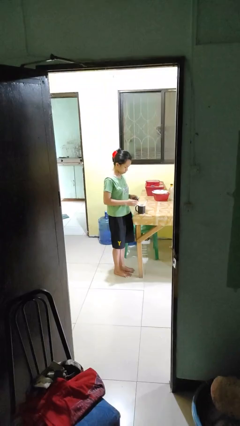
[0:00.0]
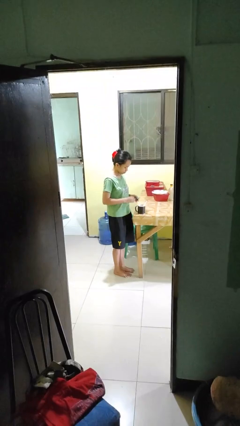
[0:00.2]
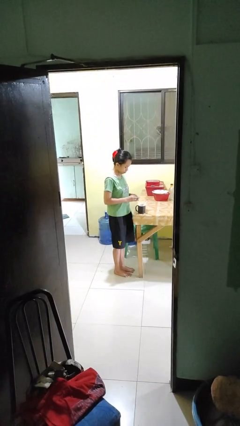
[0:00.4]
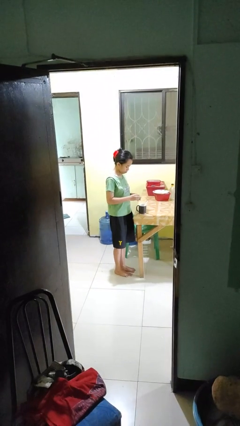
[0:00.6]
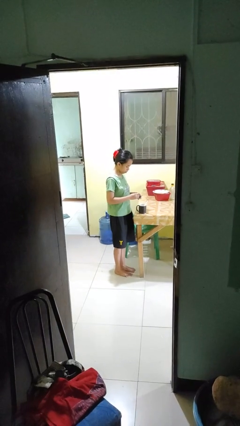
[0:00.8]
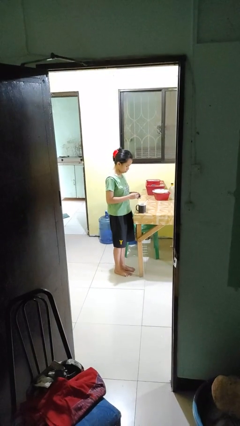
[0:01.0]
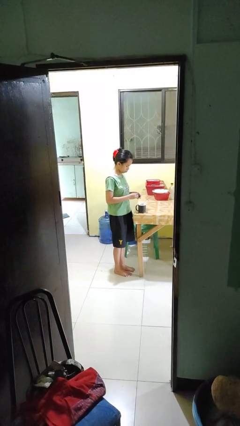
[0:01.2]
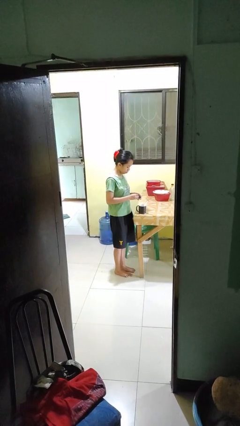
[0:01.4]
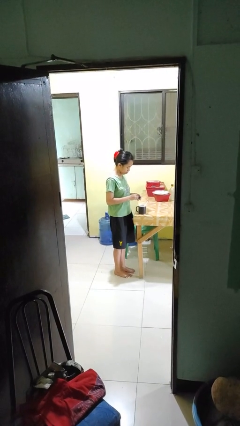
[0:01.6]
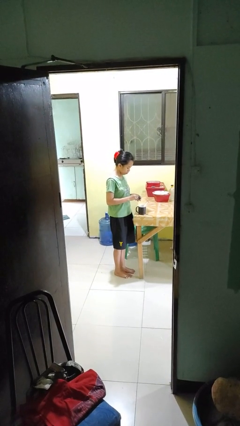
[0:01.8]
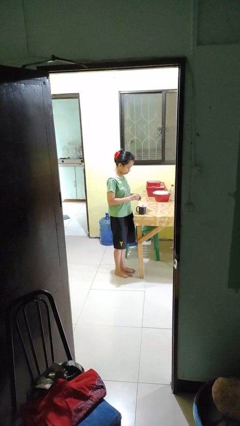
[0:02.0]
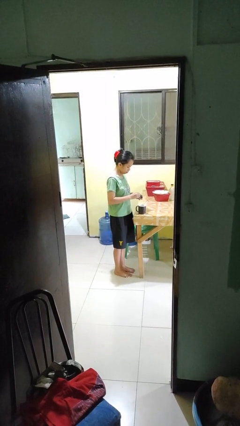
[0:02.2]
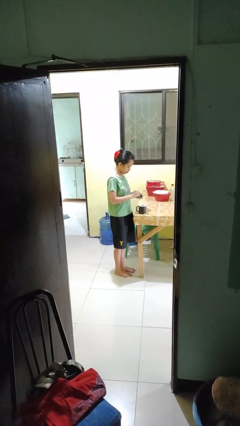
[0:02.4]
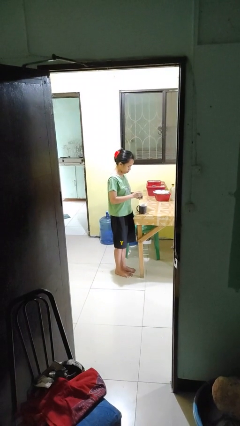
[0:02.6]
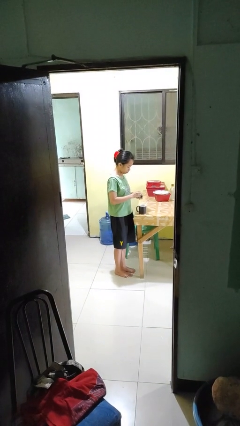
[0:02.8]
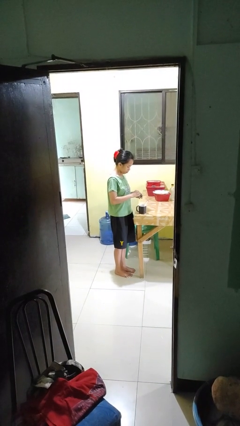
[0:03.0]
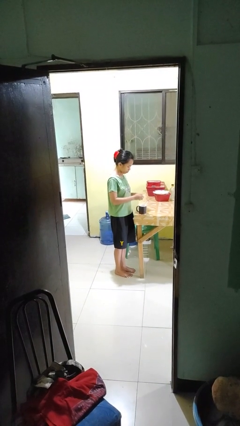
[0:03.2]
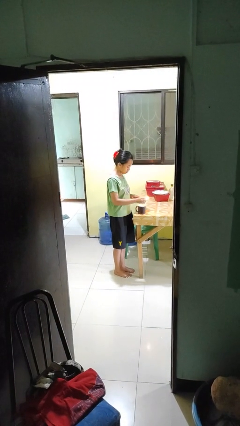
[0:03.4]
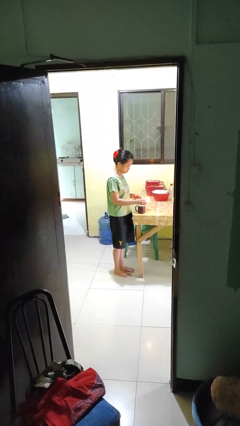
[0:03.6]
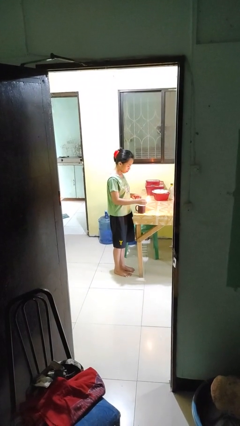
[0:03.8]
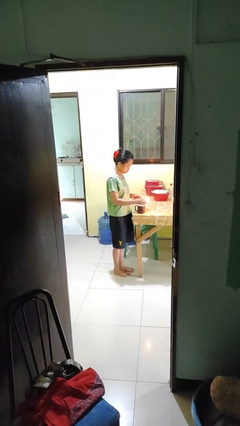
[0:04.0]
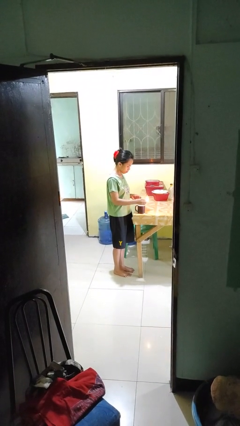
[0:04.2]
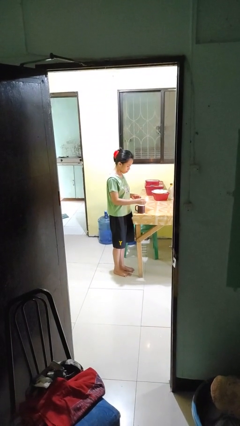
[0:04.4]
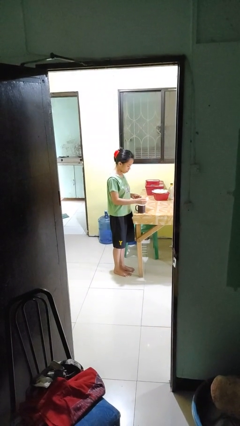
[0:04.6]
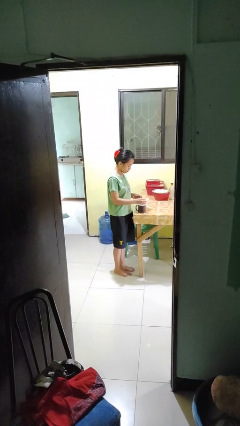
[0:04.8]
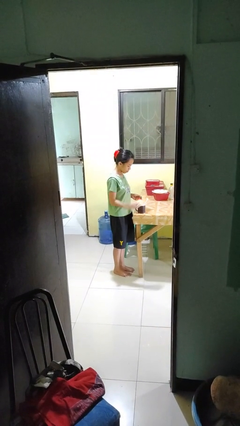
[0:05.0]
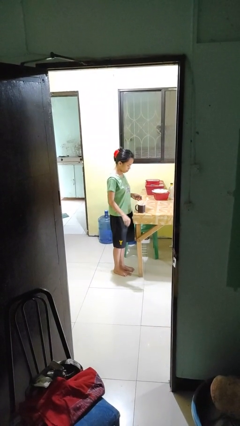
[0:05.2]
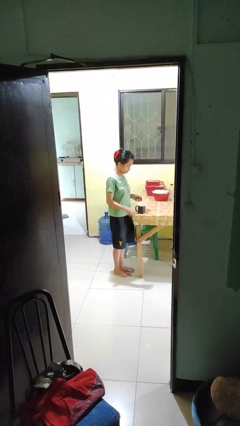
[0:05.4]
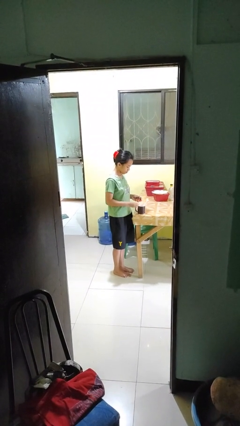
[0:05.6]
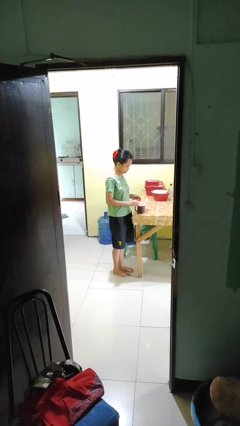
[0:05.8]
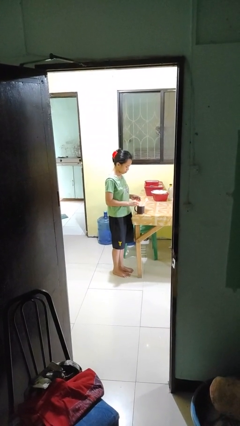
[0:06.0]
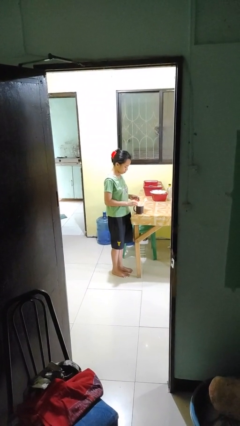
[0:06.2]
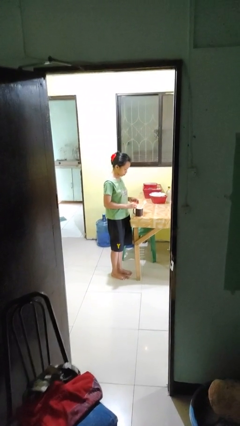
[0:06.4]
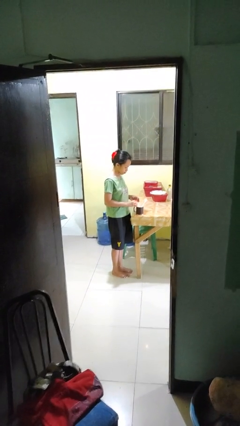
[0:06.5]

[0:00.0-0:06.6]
person lights candle

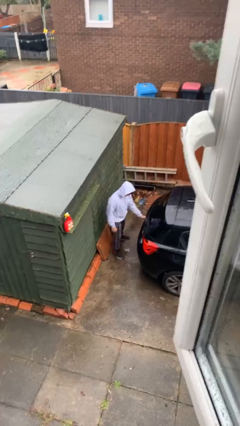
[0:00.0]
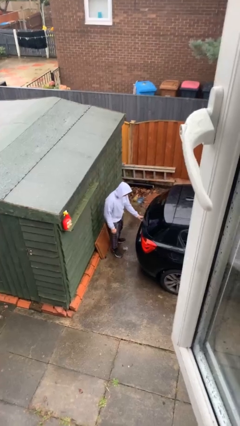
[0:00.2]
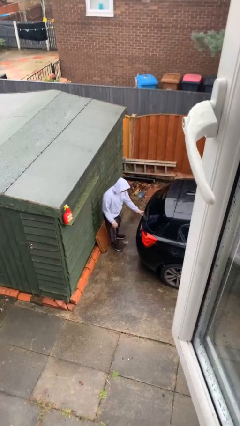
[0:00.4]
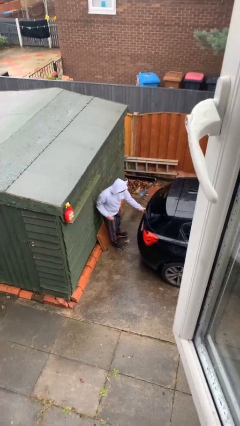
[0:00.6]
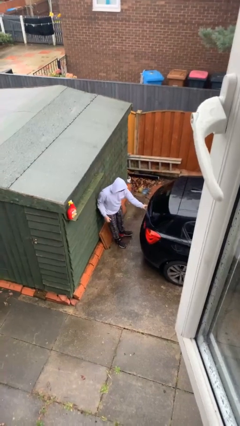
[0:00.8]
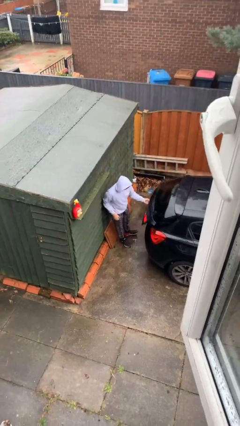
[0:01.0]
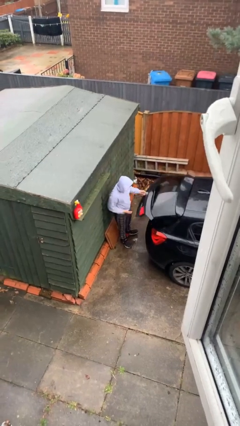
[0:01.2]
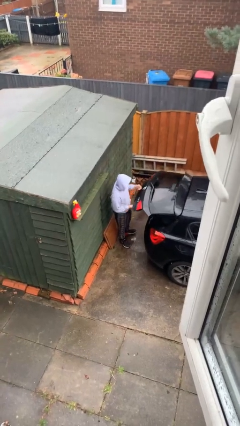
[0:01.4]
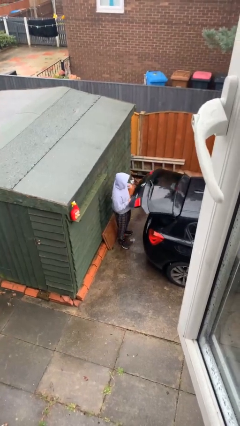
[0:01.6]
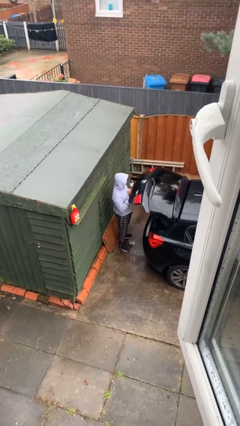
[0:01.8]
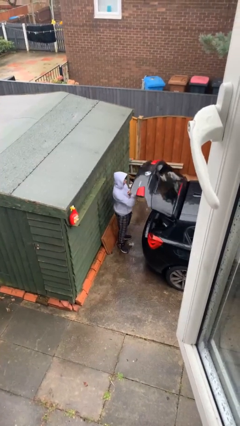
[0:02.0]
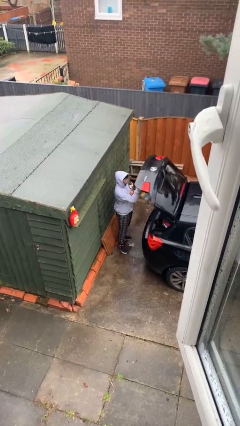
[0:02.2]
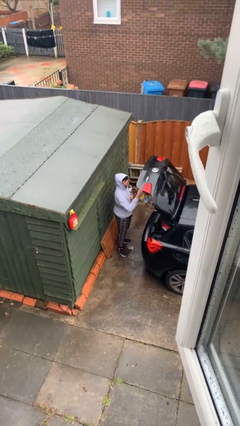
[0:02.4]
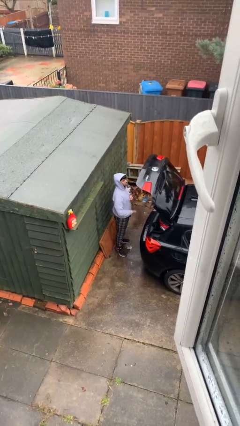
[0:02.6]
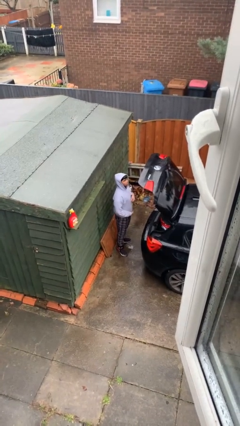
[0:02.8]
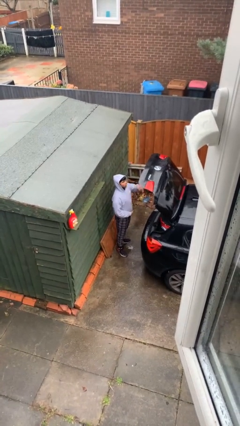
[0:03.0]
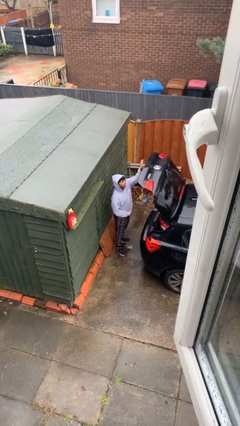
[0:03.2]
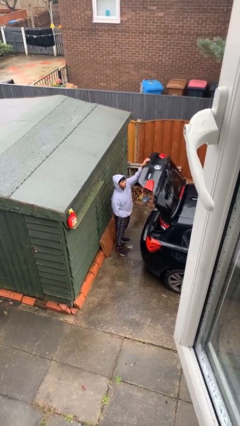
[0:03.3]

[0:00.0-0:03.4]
person opens car trunk

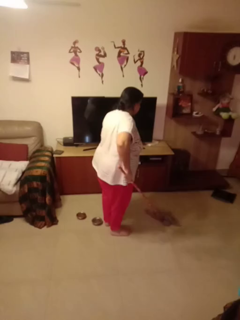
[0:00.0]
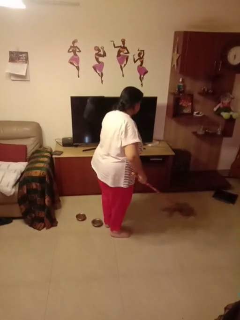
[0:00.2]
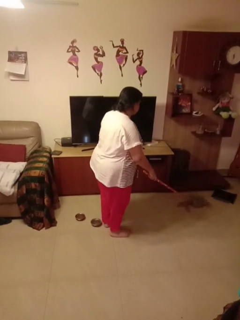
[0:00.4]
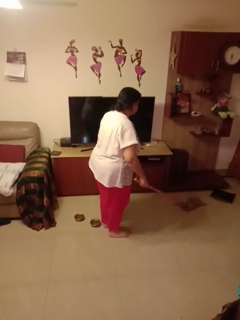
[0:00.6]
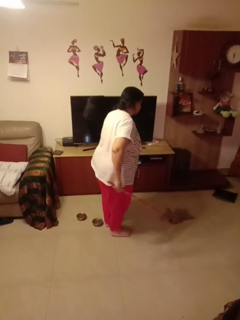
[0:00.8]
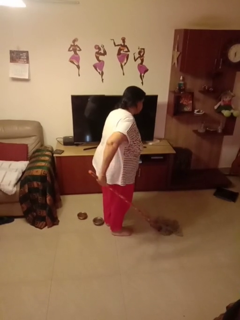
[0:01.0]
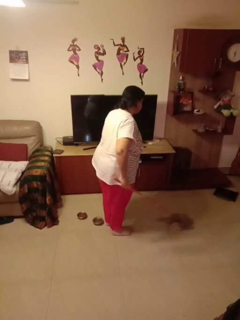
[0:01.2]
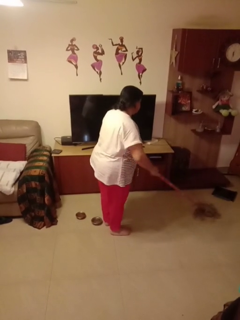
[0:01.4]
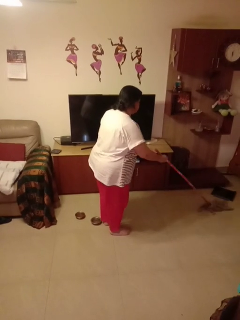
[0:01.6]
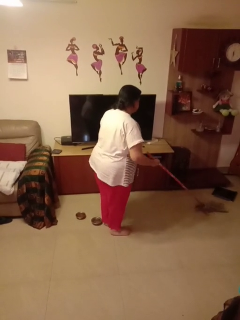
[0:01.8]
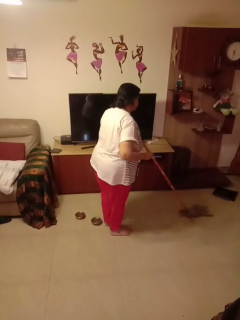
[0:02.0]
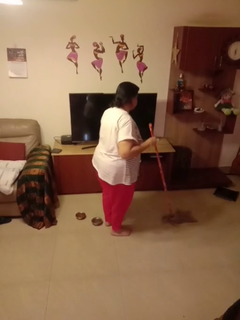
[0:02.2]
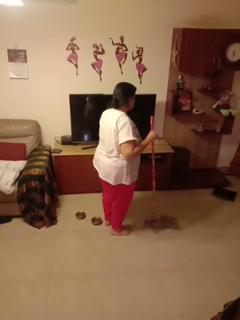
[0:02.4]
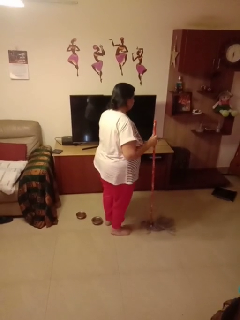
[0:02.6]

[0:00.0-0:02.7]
person mops

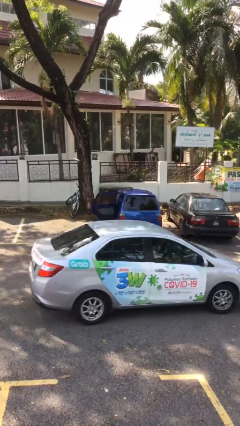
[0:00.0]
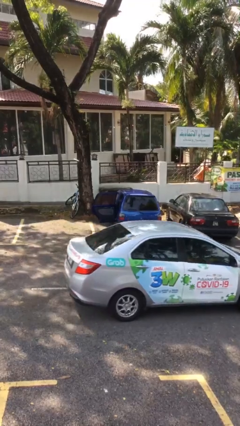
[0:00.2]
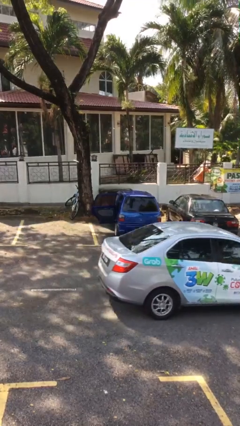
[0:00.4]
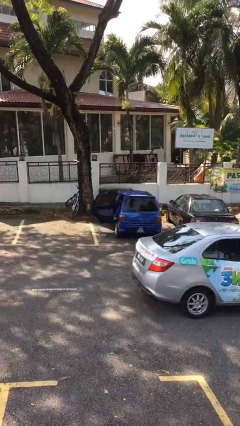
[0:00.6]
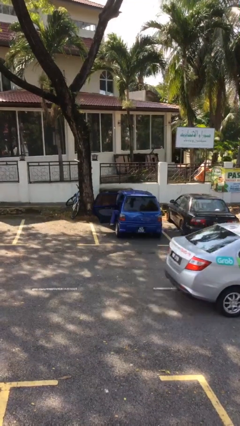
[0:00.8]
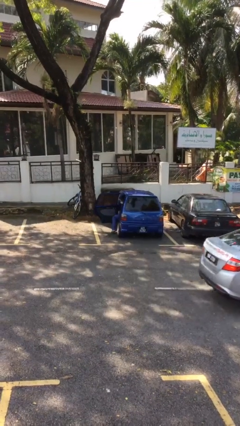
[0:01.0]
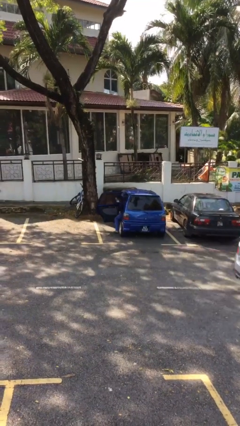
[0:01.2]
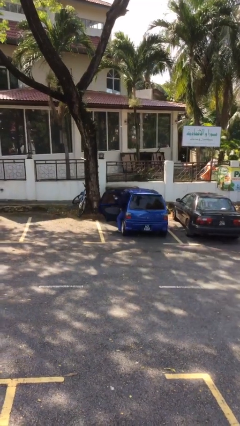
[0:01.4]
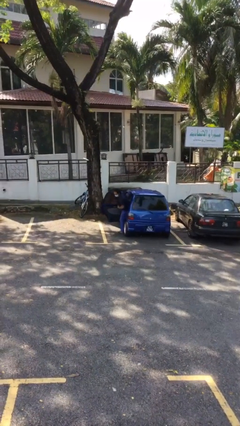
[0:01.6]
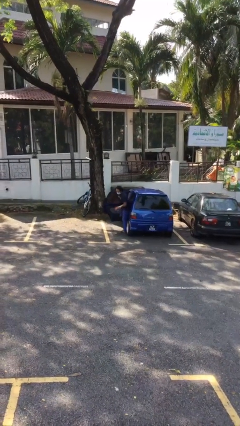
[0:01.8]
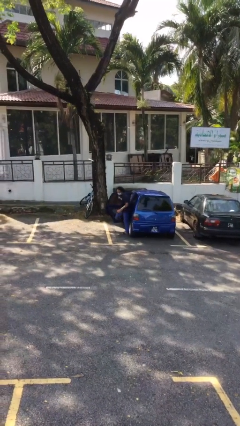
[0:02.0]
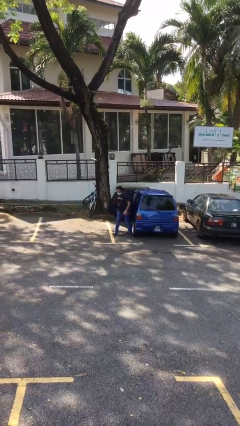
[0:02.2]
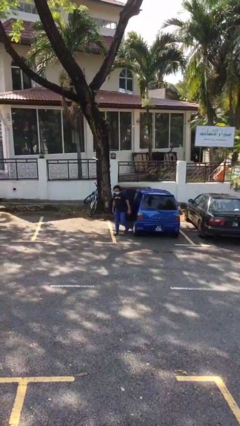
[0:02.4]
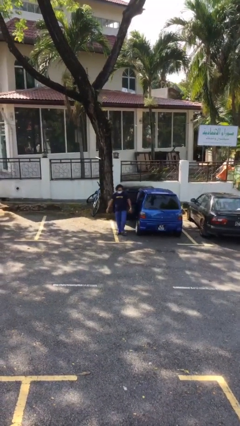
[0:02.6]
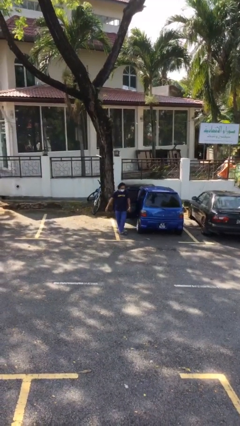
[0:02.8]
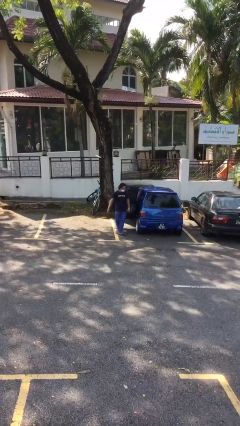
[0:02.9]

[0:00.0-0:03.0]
person exits car

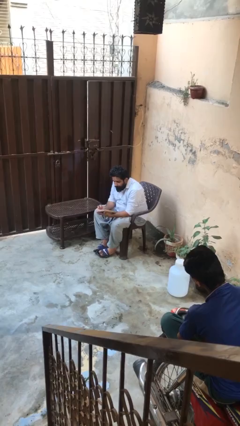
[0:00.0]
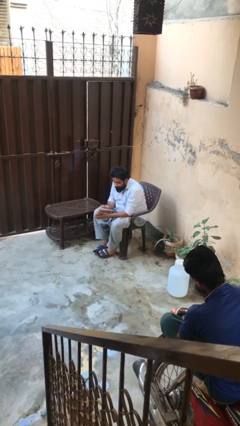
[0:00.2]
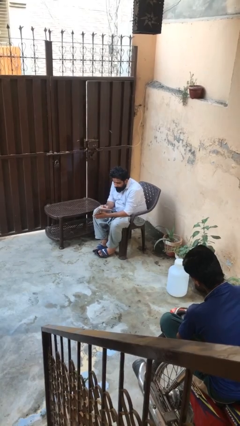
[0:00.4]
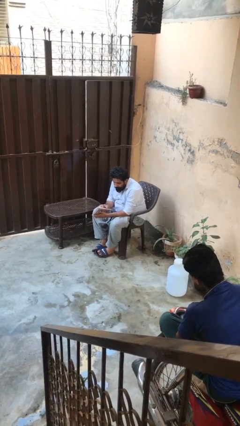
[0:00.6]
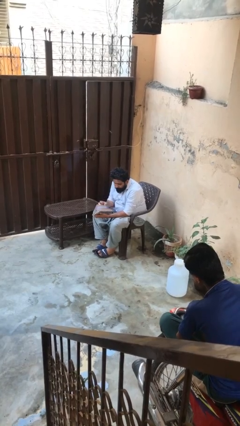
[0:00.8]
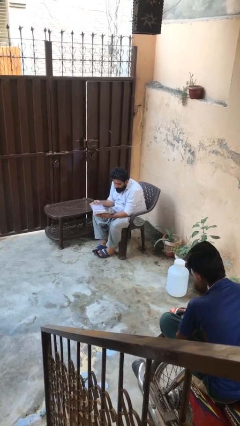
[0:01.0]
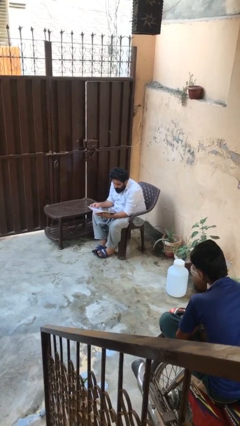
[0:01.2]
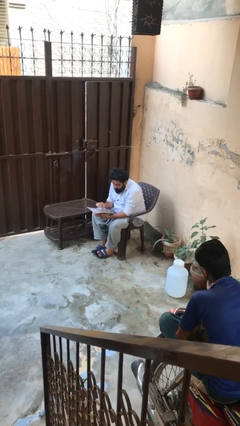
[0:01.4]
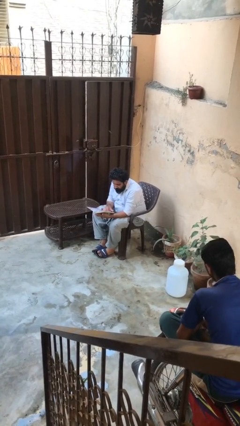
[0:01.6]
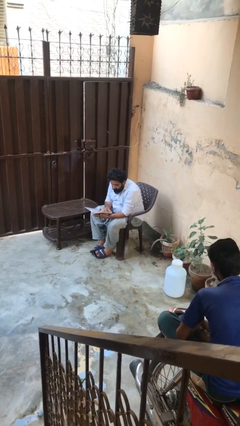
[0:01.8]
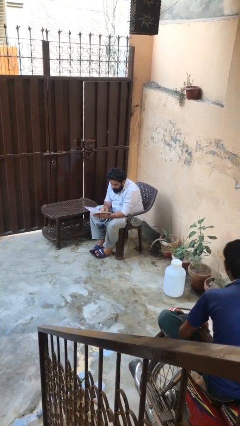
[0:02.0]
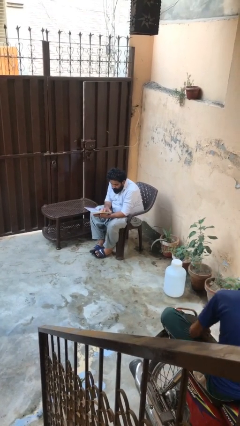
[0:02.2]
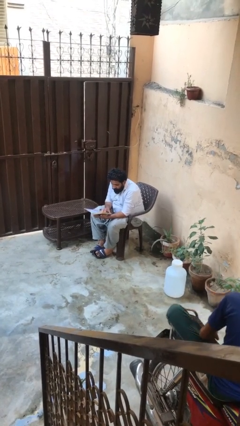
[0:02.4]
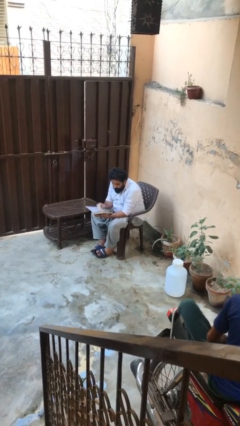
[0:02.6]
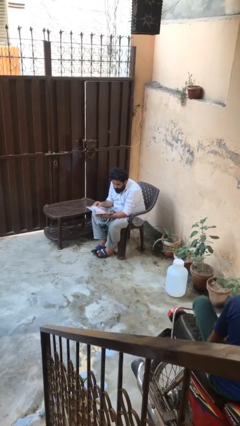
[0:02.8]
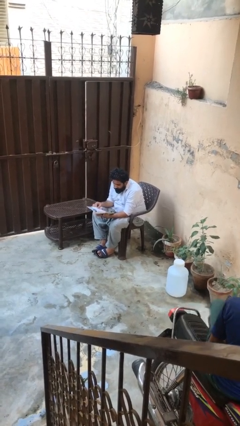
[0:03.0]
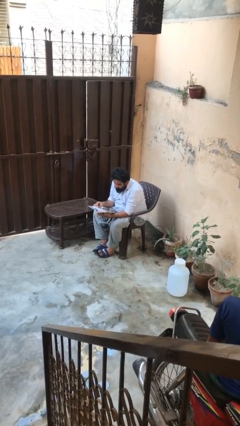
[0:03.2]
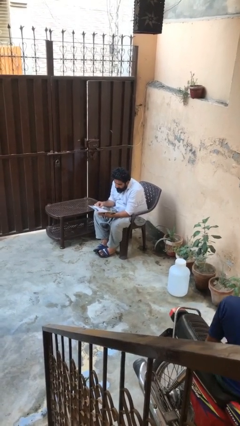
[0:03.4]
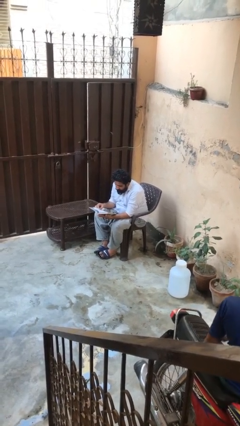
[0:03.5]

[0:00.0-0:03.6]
person reads document
